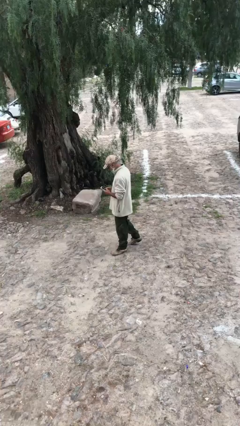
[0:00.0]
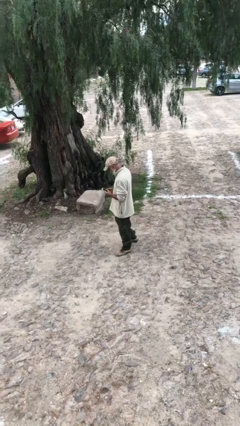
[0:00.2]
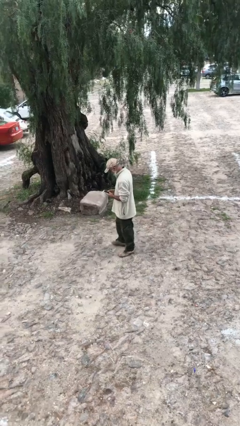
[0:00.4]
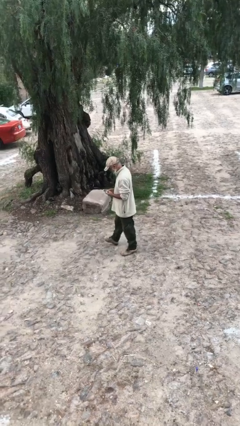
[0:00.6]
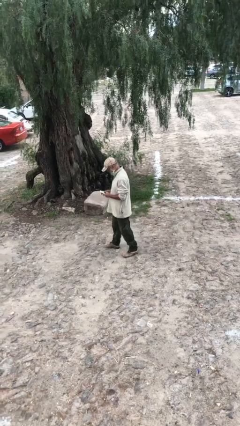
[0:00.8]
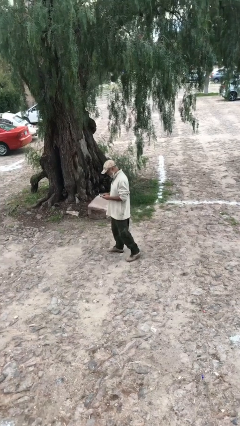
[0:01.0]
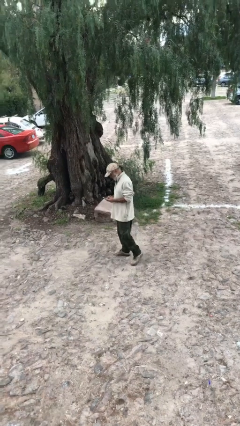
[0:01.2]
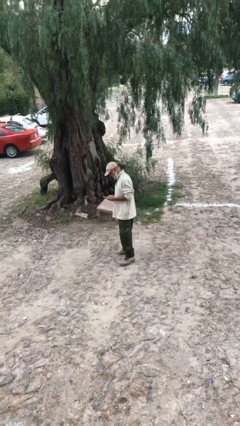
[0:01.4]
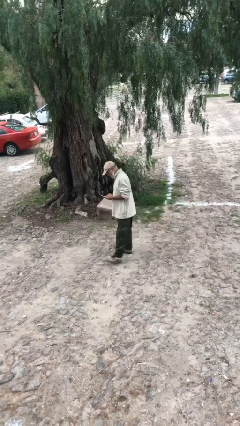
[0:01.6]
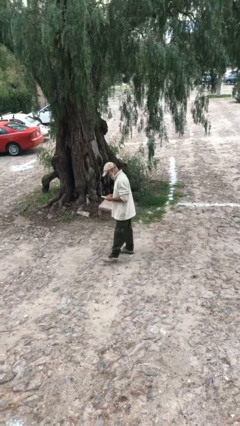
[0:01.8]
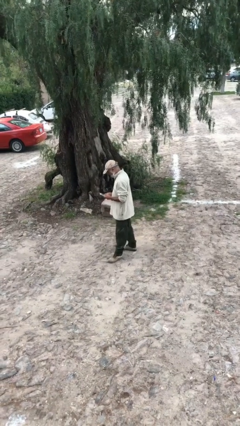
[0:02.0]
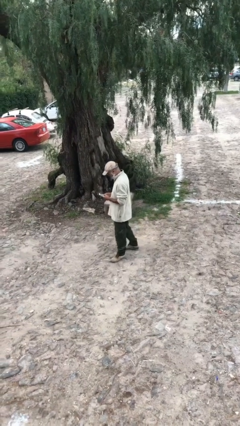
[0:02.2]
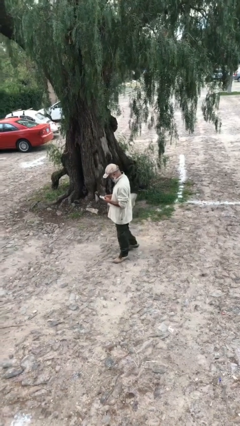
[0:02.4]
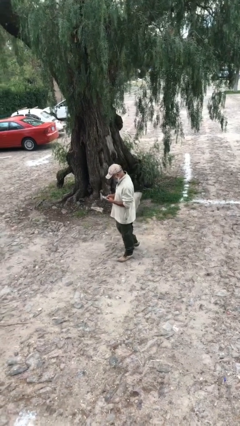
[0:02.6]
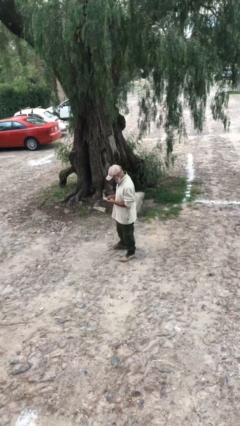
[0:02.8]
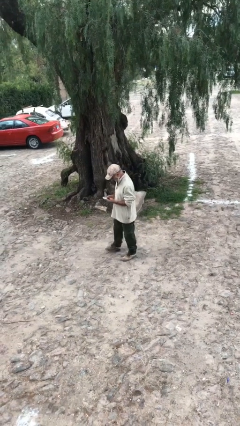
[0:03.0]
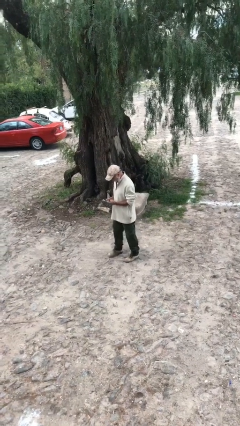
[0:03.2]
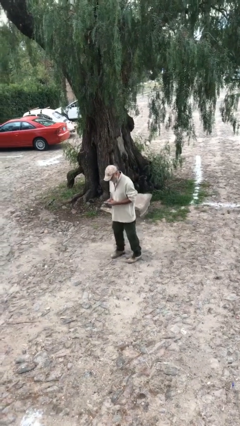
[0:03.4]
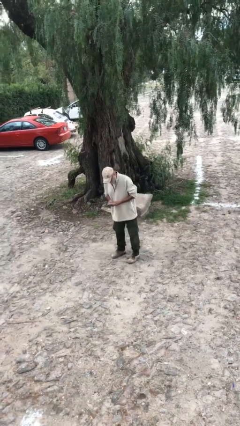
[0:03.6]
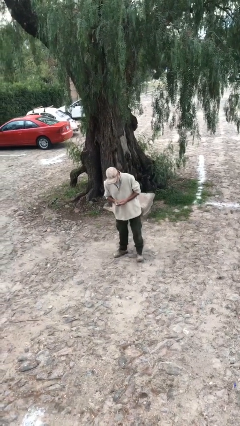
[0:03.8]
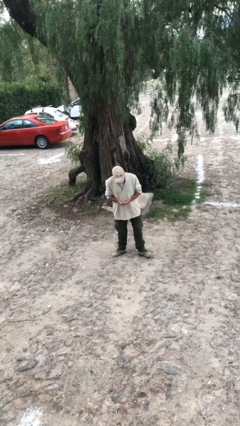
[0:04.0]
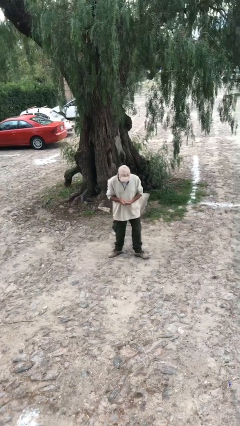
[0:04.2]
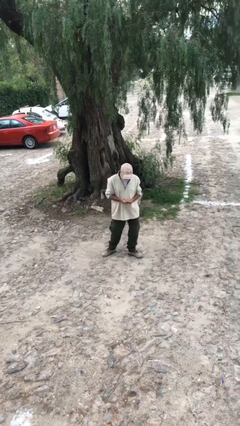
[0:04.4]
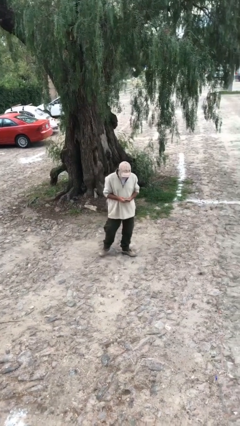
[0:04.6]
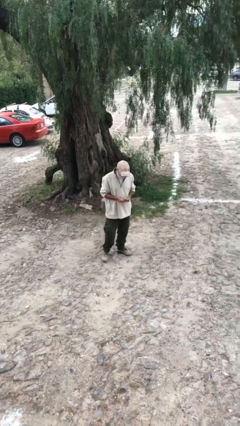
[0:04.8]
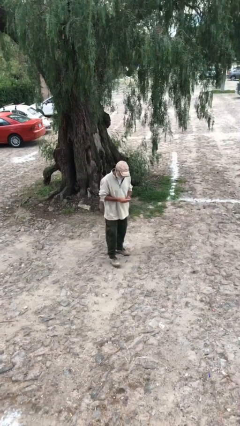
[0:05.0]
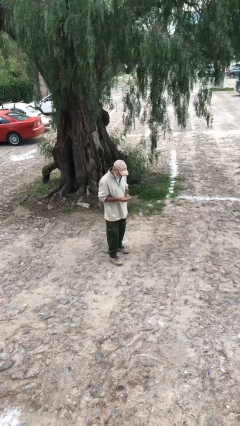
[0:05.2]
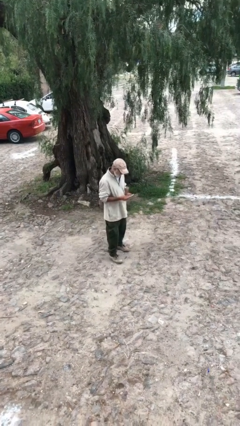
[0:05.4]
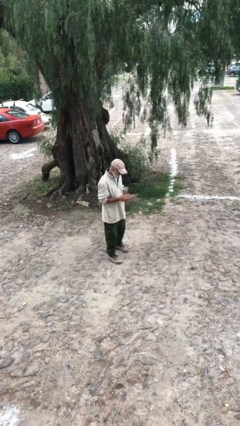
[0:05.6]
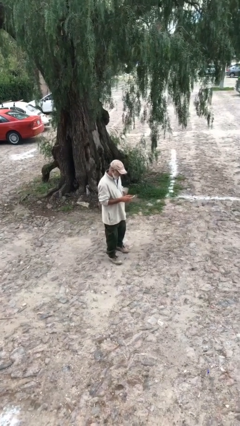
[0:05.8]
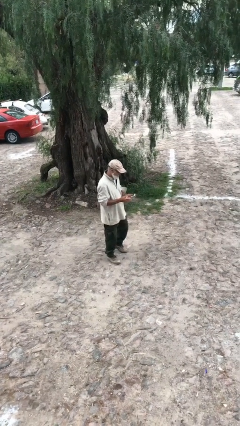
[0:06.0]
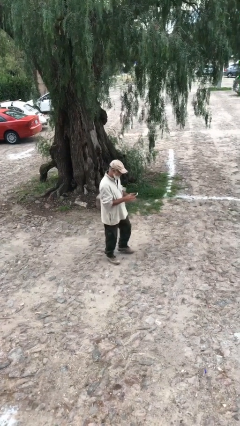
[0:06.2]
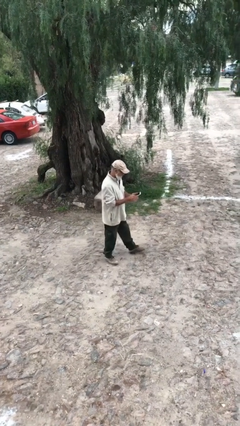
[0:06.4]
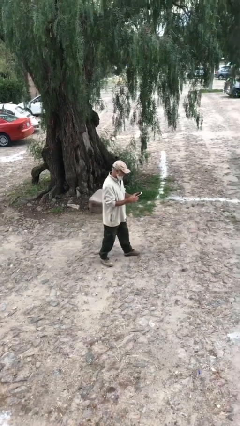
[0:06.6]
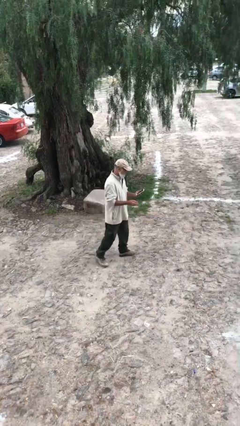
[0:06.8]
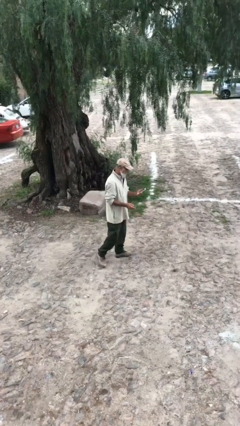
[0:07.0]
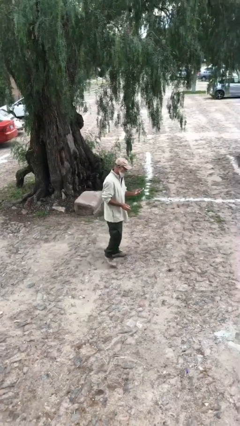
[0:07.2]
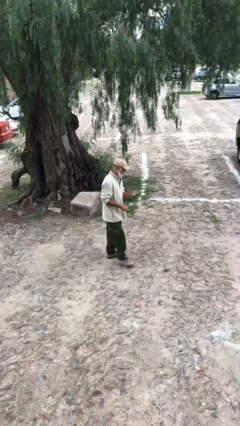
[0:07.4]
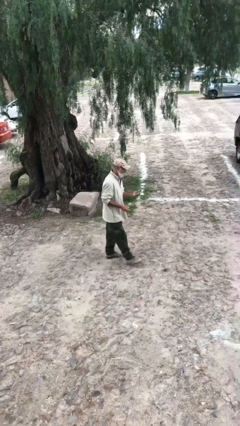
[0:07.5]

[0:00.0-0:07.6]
person texts on phone

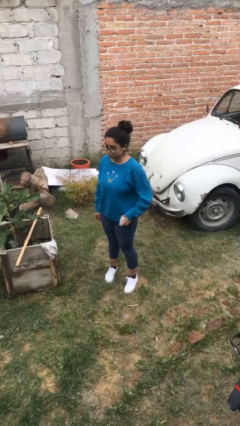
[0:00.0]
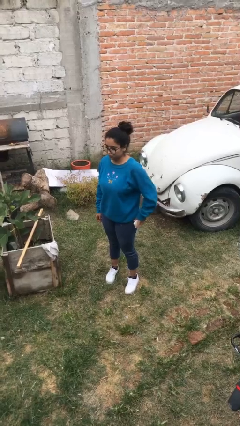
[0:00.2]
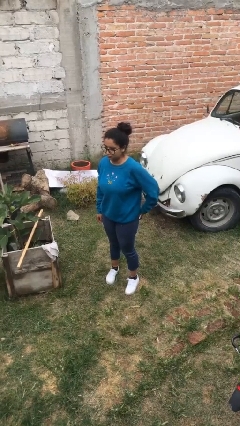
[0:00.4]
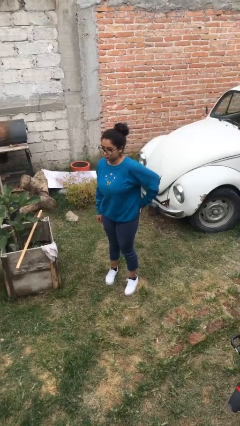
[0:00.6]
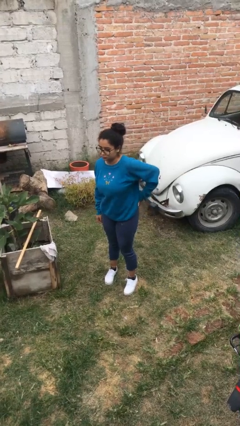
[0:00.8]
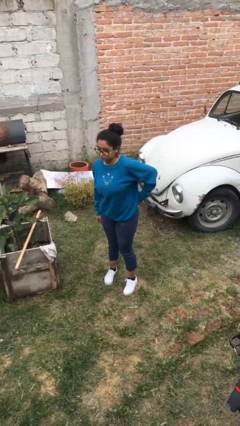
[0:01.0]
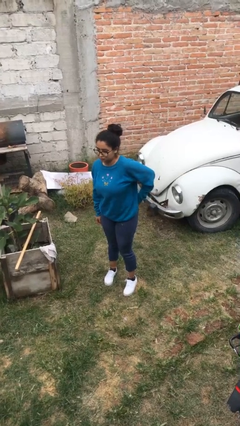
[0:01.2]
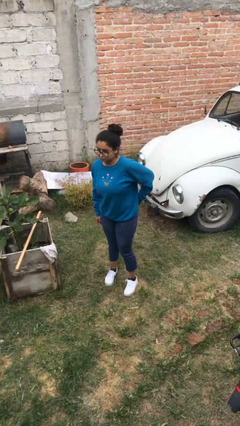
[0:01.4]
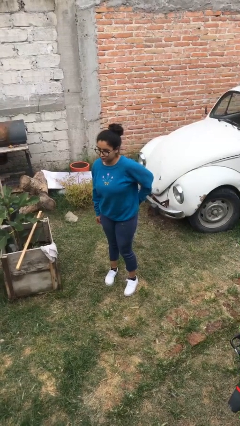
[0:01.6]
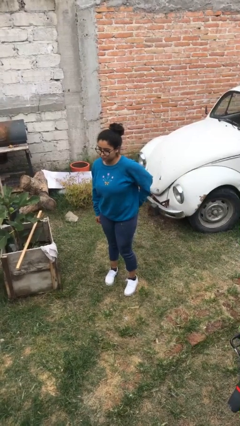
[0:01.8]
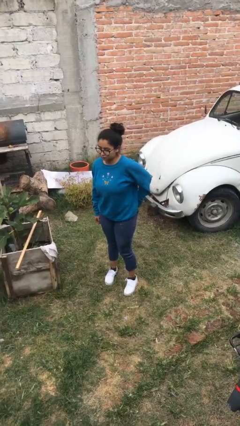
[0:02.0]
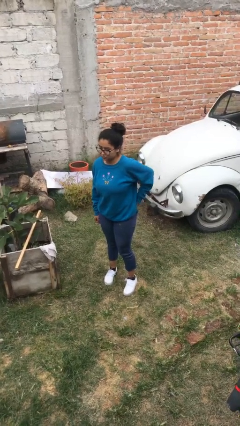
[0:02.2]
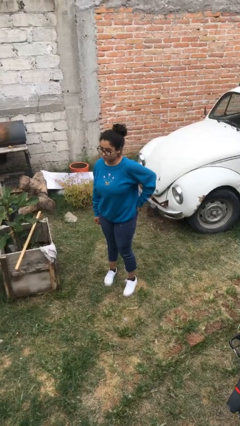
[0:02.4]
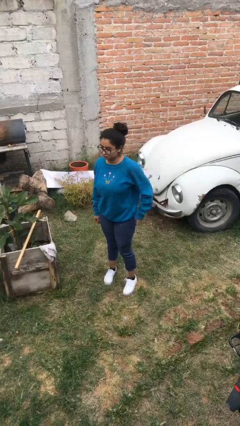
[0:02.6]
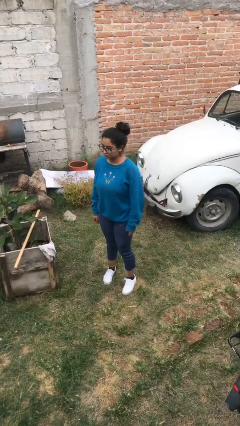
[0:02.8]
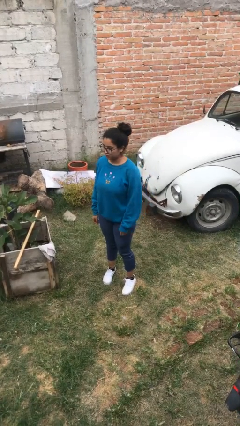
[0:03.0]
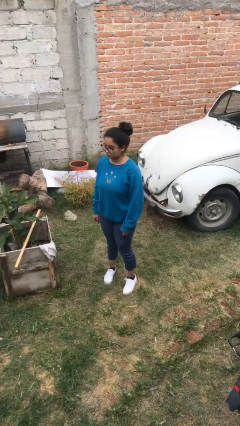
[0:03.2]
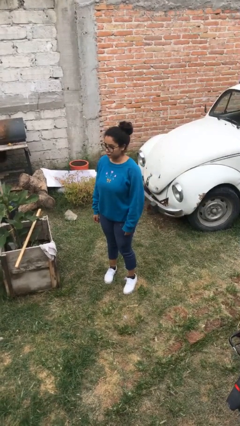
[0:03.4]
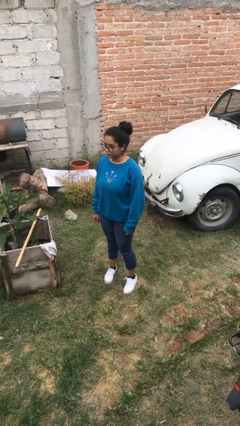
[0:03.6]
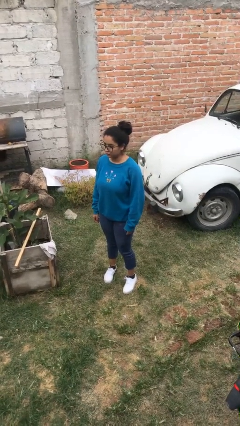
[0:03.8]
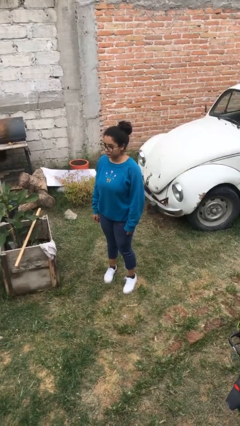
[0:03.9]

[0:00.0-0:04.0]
person puts phone into pocket

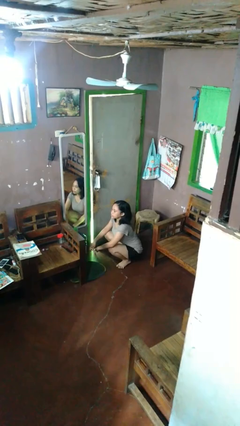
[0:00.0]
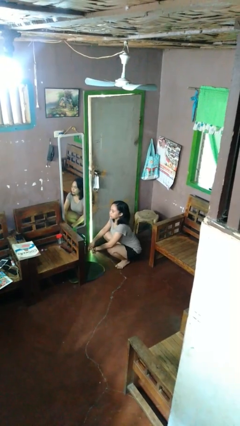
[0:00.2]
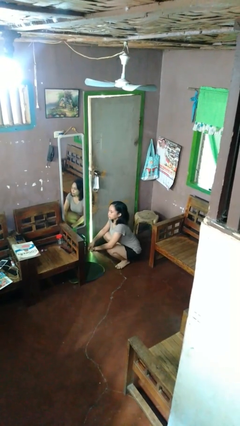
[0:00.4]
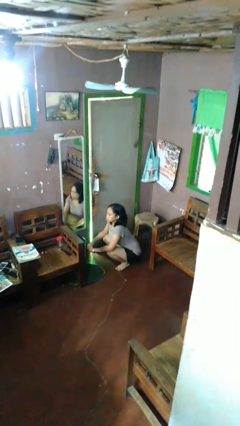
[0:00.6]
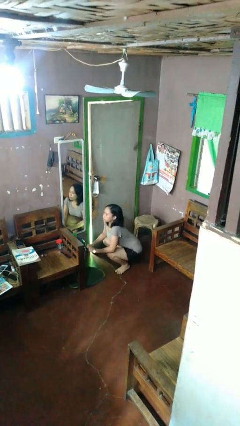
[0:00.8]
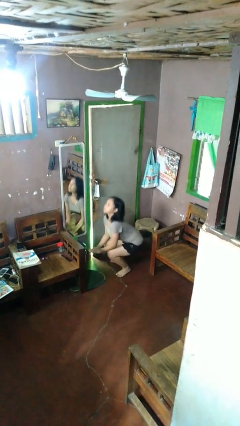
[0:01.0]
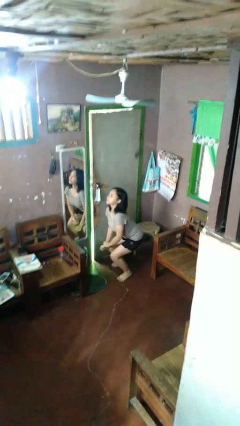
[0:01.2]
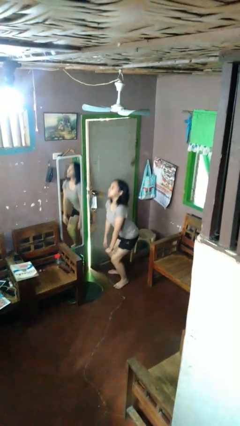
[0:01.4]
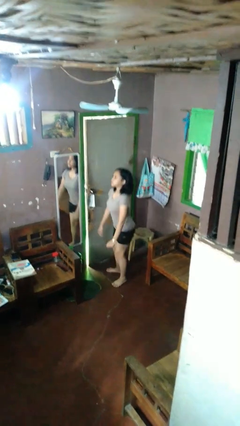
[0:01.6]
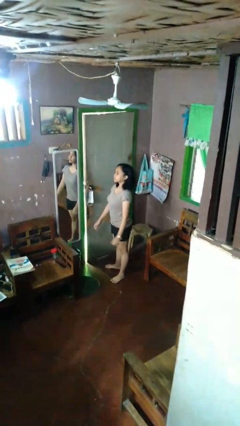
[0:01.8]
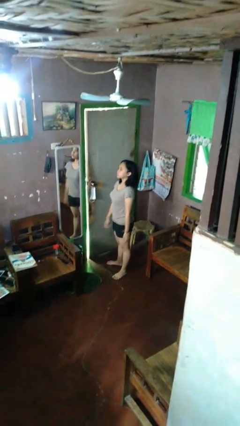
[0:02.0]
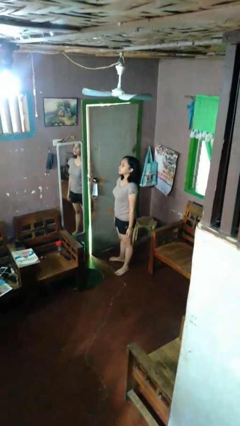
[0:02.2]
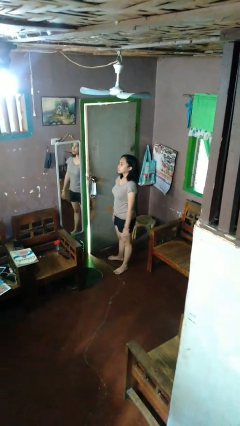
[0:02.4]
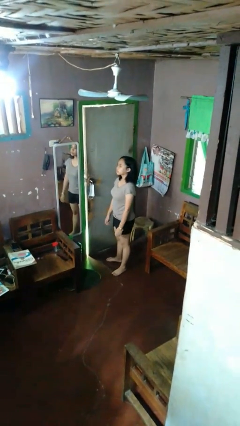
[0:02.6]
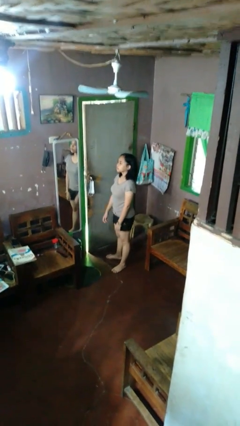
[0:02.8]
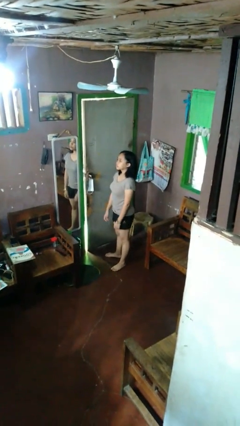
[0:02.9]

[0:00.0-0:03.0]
person stands up

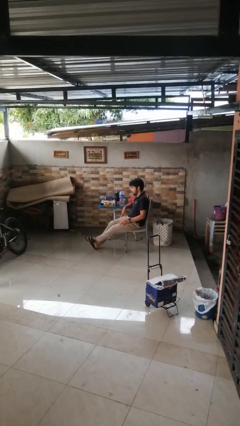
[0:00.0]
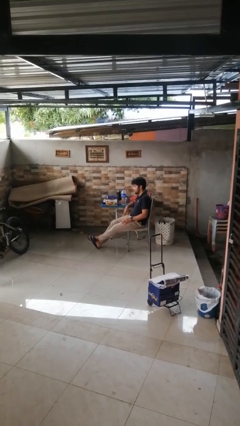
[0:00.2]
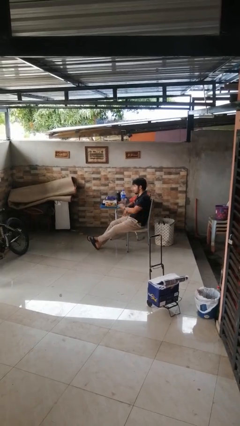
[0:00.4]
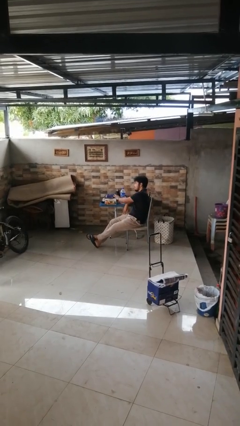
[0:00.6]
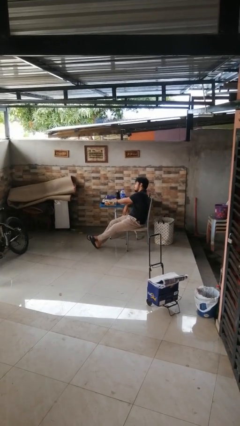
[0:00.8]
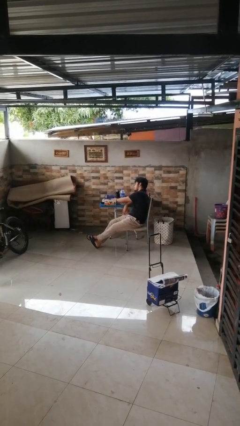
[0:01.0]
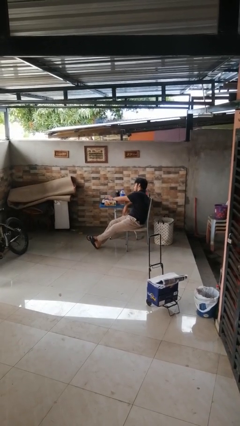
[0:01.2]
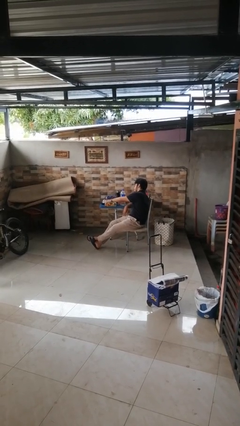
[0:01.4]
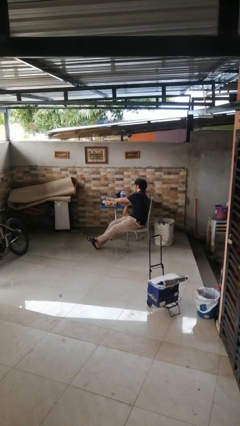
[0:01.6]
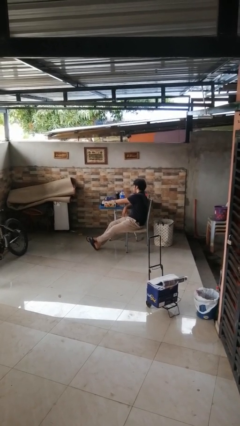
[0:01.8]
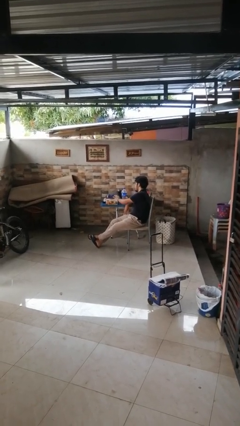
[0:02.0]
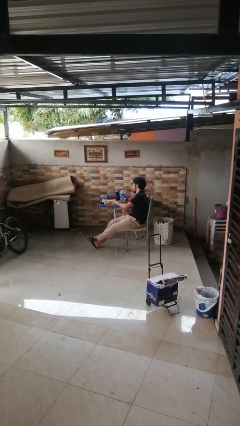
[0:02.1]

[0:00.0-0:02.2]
person taps object with finger

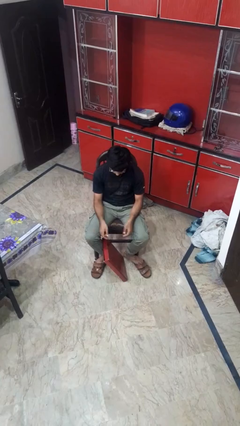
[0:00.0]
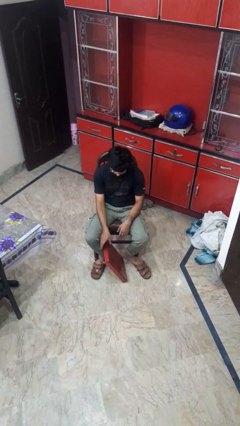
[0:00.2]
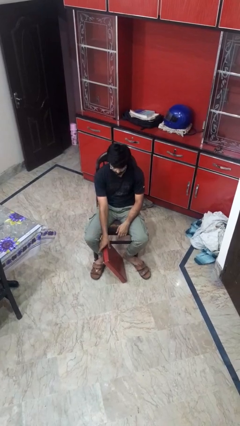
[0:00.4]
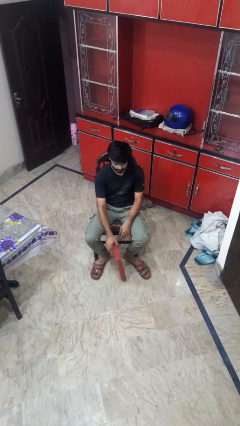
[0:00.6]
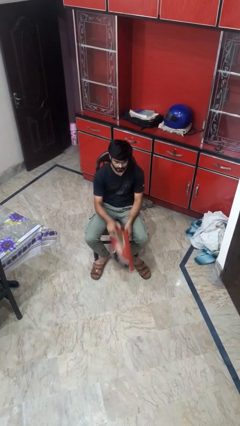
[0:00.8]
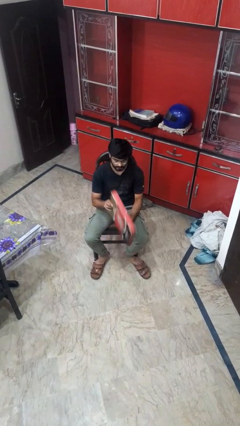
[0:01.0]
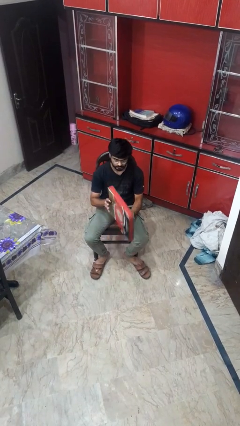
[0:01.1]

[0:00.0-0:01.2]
person picks up object from floor
